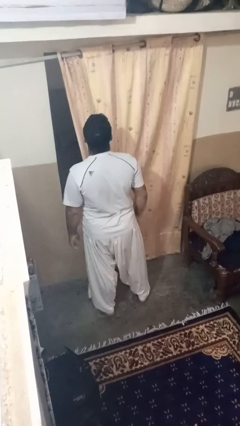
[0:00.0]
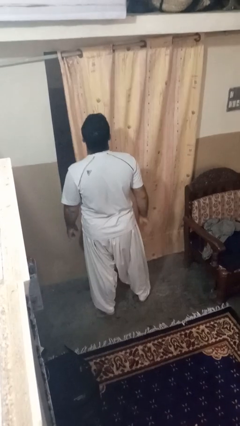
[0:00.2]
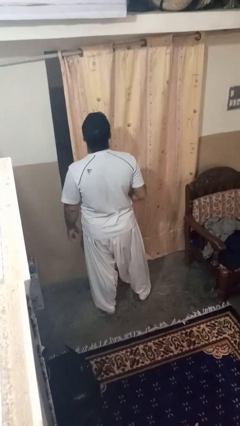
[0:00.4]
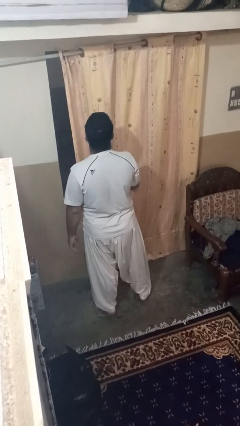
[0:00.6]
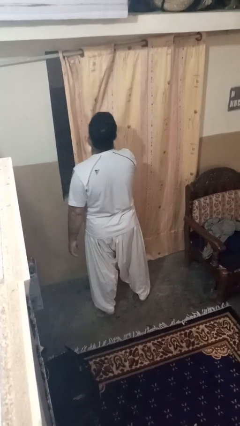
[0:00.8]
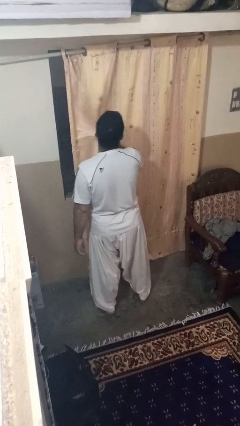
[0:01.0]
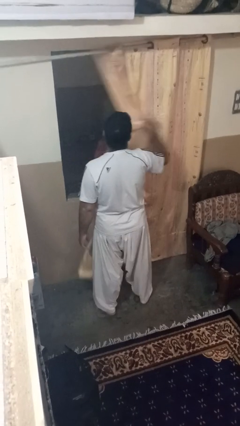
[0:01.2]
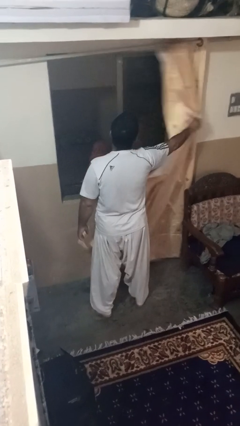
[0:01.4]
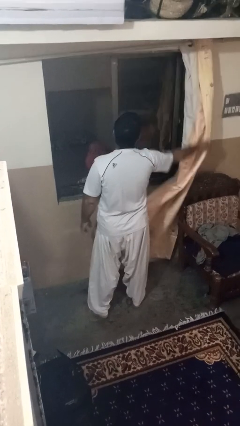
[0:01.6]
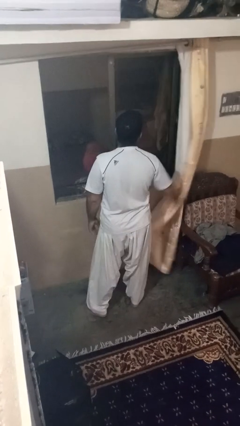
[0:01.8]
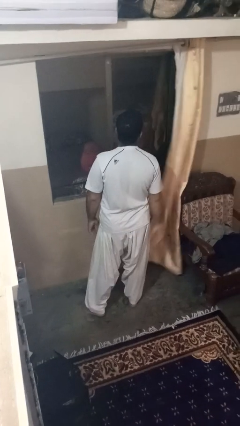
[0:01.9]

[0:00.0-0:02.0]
person opens curtains

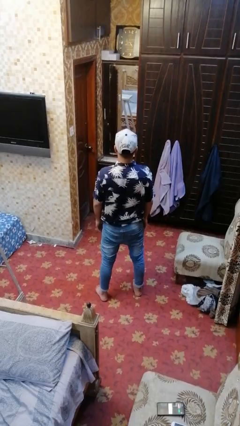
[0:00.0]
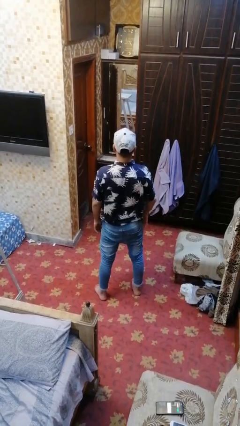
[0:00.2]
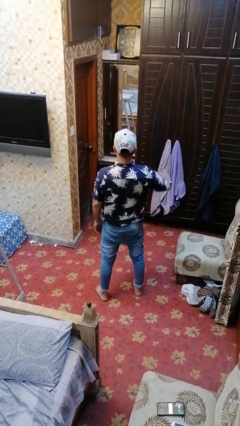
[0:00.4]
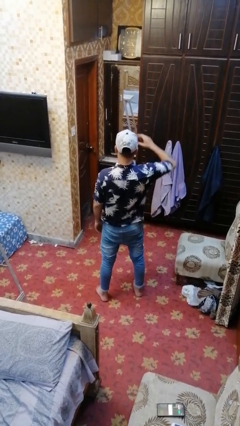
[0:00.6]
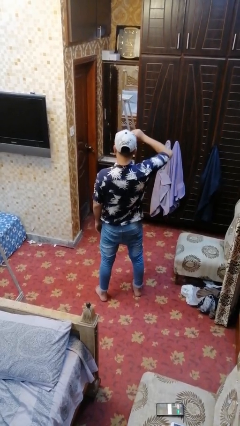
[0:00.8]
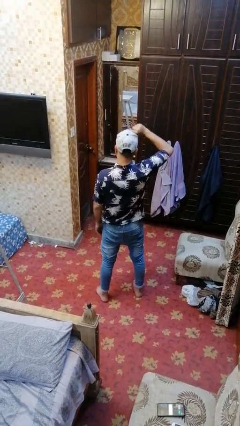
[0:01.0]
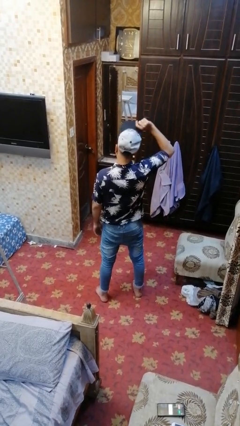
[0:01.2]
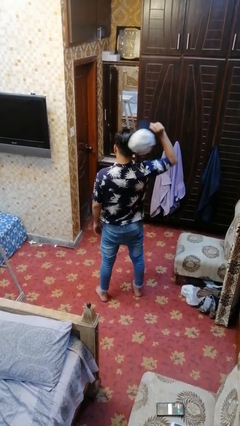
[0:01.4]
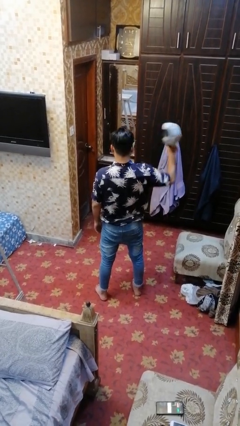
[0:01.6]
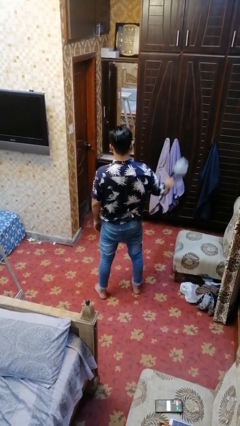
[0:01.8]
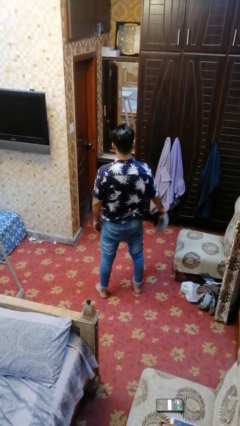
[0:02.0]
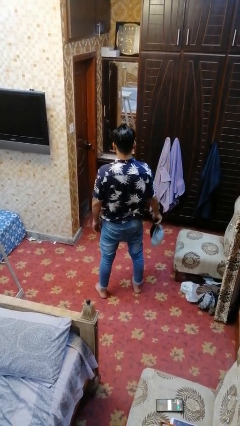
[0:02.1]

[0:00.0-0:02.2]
person takes off hat

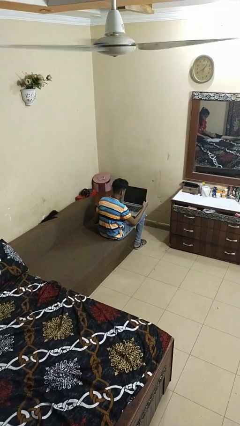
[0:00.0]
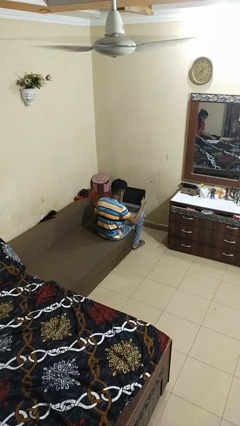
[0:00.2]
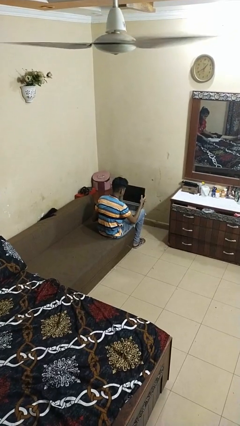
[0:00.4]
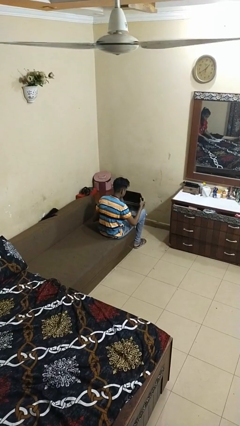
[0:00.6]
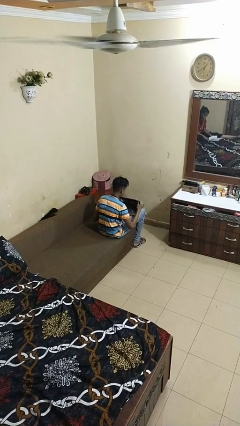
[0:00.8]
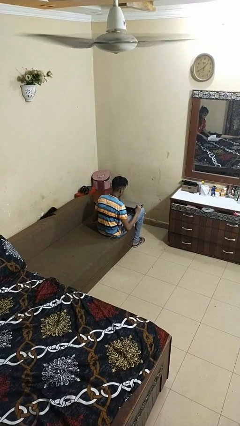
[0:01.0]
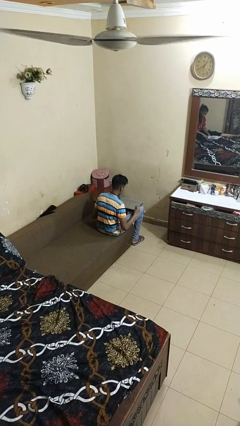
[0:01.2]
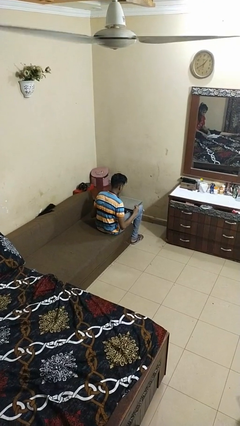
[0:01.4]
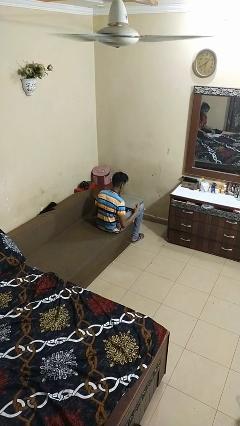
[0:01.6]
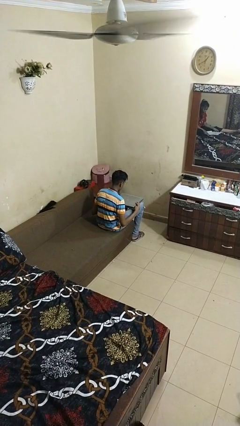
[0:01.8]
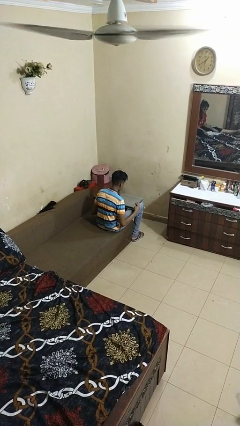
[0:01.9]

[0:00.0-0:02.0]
person closes laptop

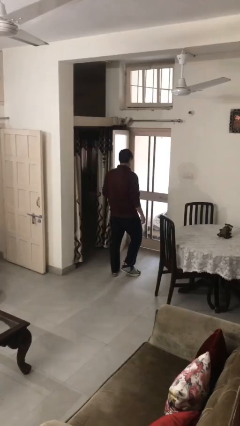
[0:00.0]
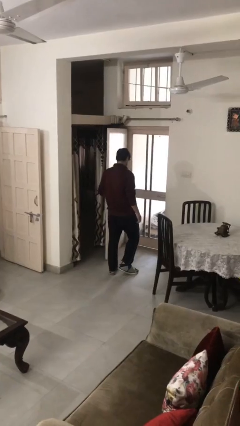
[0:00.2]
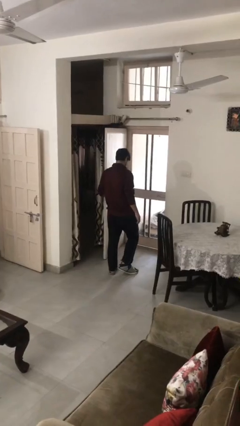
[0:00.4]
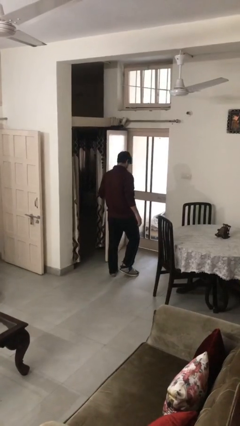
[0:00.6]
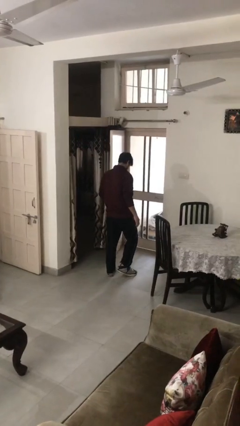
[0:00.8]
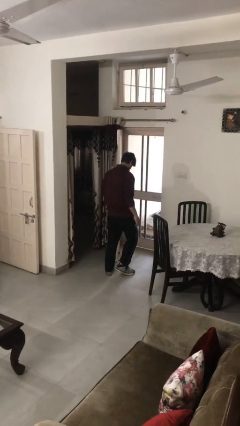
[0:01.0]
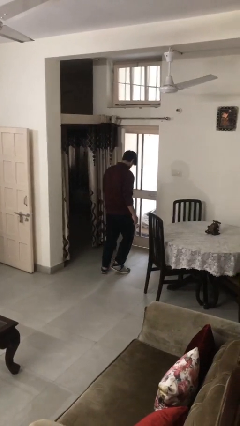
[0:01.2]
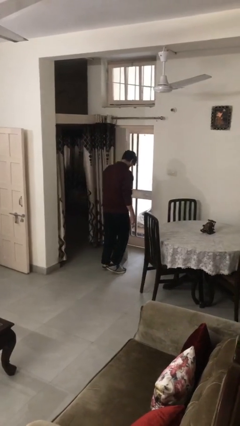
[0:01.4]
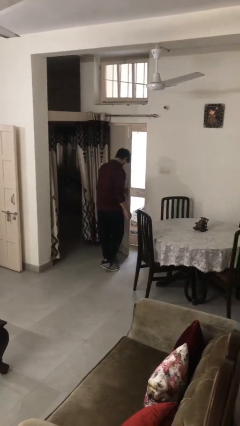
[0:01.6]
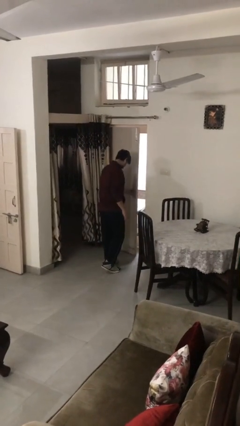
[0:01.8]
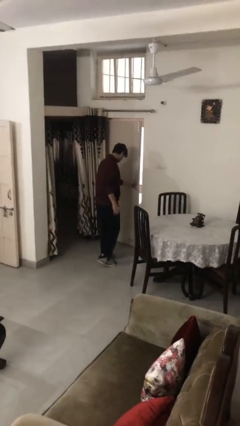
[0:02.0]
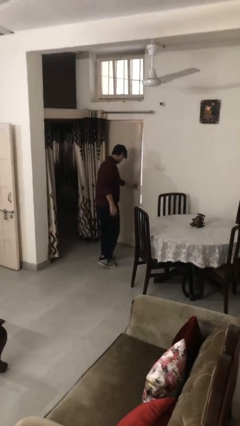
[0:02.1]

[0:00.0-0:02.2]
person closes facility door

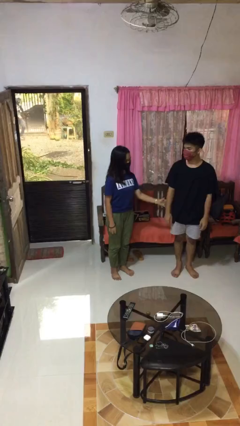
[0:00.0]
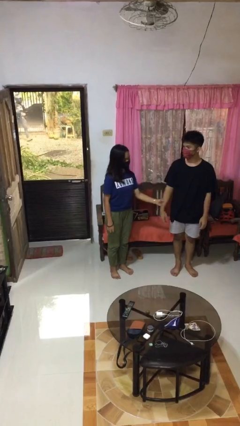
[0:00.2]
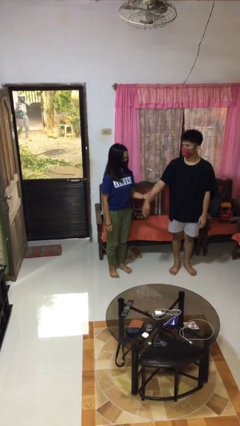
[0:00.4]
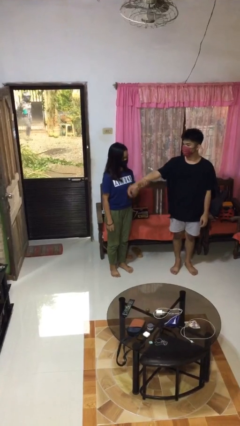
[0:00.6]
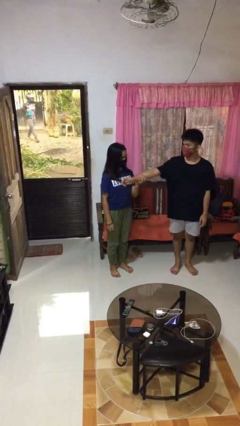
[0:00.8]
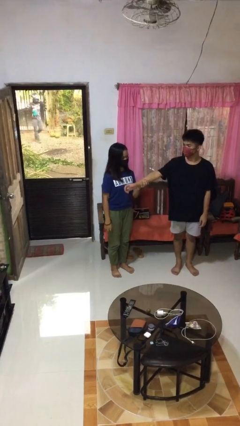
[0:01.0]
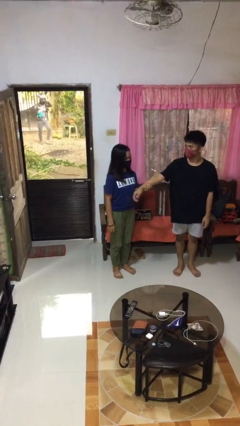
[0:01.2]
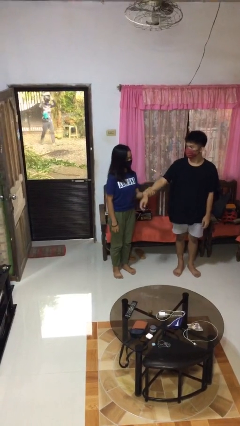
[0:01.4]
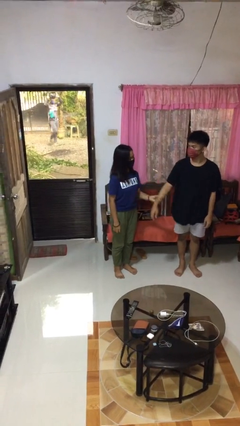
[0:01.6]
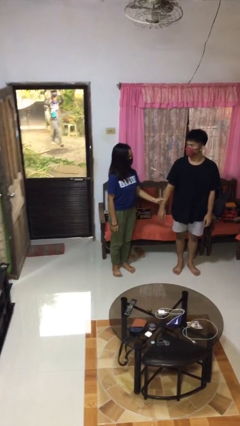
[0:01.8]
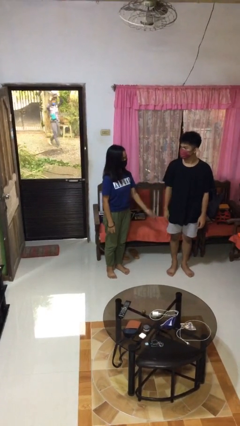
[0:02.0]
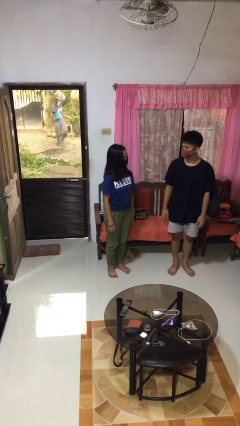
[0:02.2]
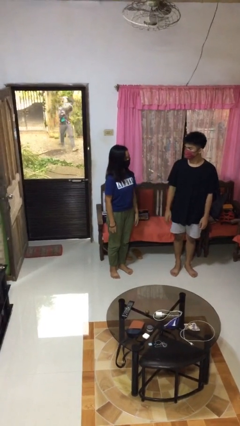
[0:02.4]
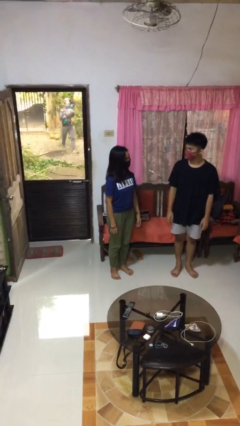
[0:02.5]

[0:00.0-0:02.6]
person grabs person by forearm

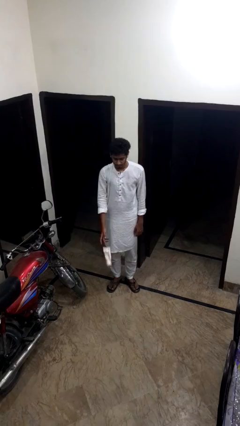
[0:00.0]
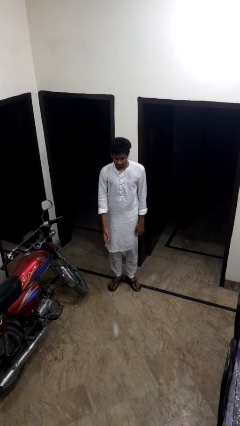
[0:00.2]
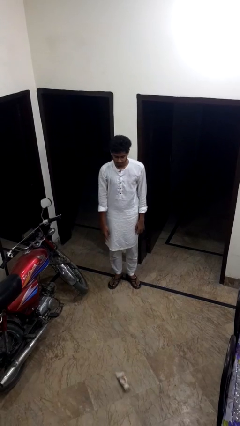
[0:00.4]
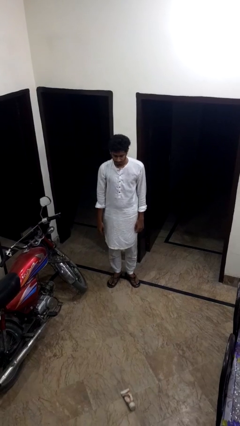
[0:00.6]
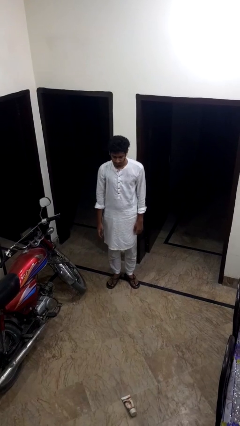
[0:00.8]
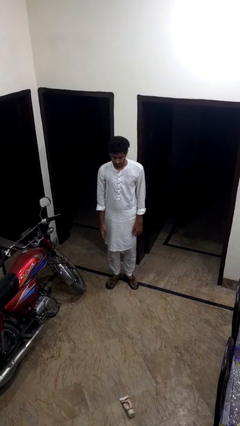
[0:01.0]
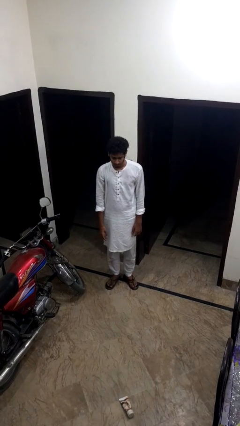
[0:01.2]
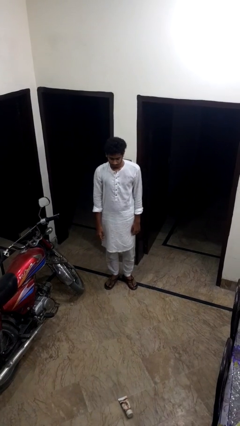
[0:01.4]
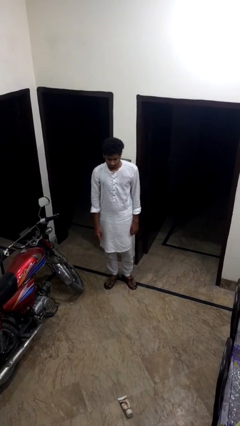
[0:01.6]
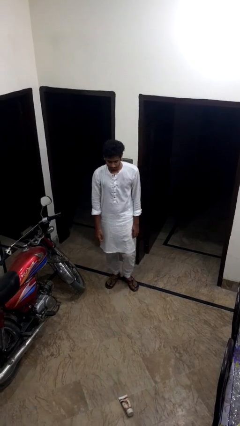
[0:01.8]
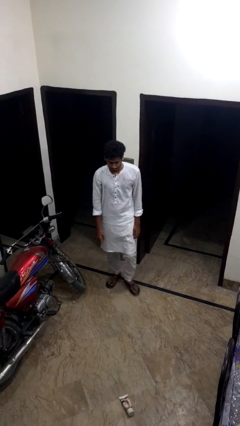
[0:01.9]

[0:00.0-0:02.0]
person throws object to ground

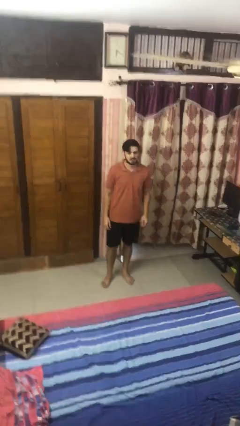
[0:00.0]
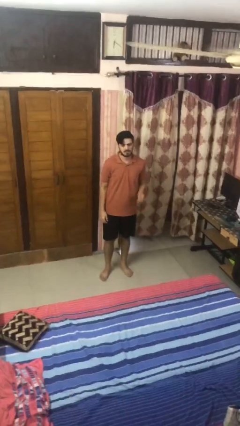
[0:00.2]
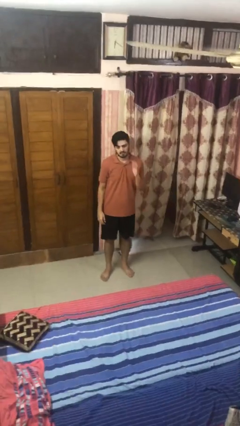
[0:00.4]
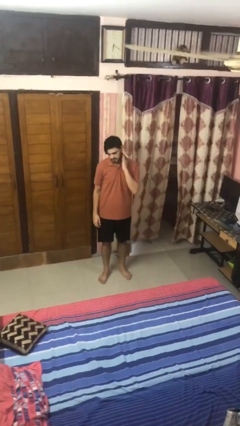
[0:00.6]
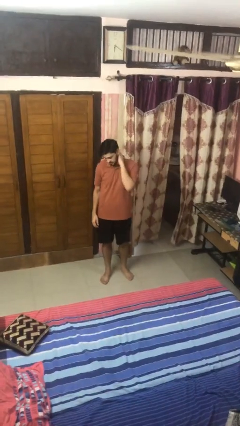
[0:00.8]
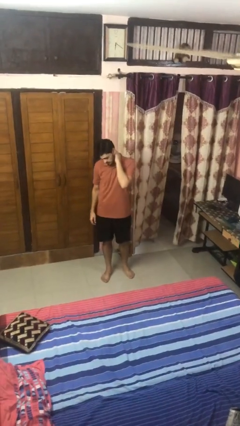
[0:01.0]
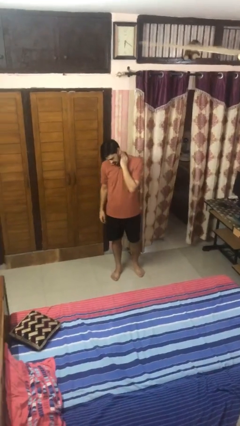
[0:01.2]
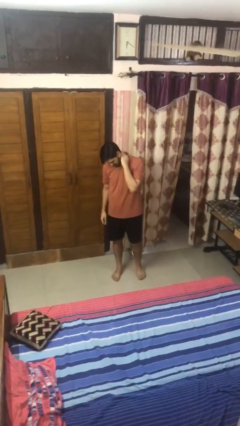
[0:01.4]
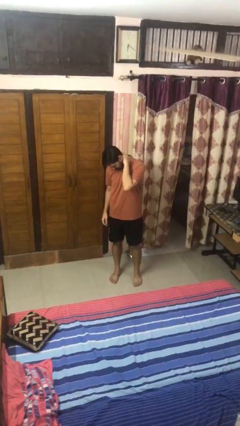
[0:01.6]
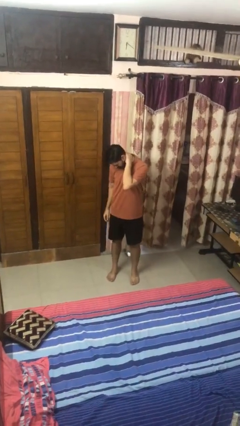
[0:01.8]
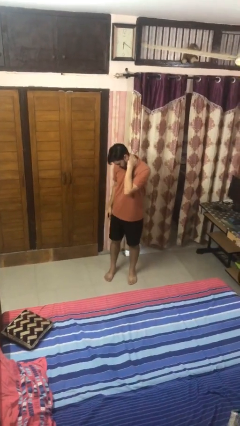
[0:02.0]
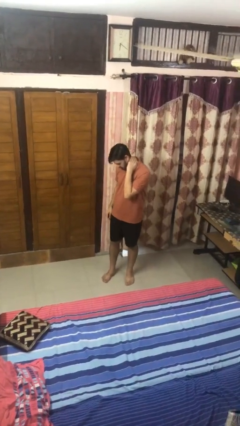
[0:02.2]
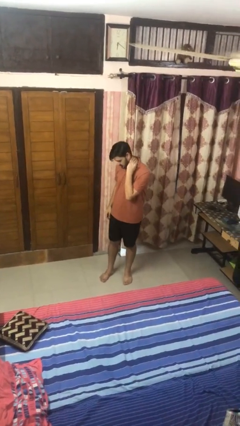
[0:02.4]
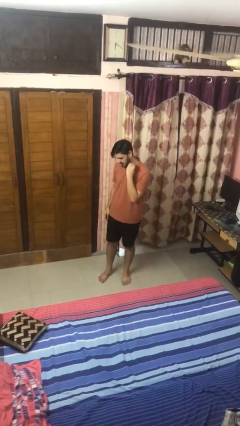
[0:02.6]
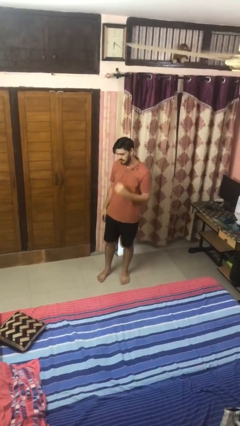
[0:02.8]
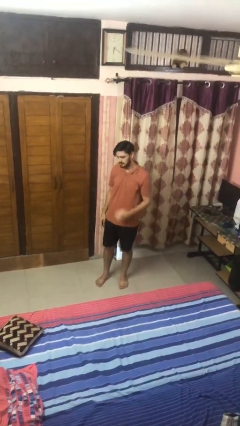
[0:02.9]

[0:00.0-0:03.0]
person rubs neck

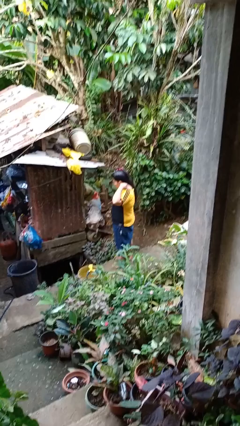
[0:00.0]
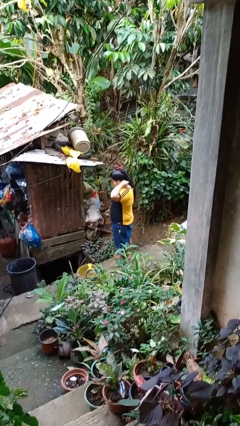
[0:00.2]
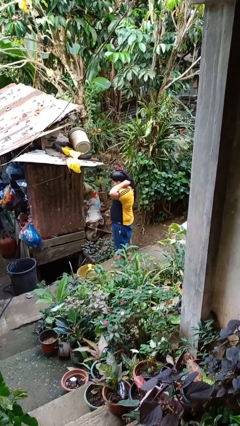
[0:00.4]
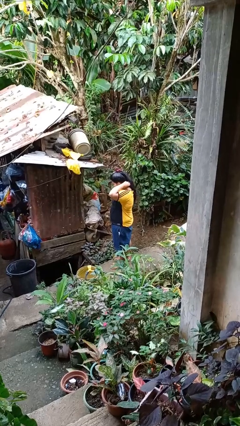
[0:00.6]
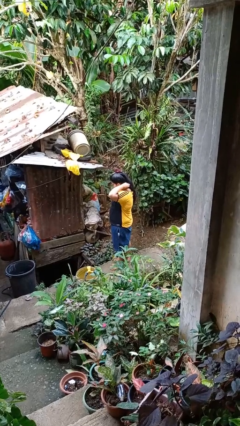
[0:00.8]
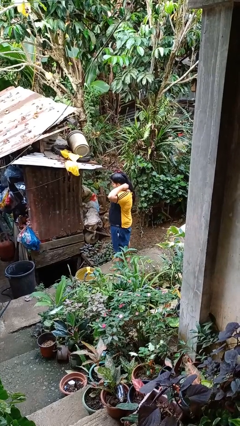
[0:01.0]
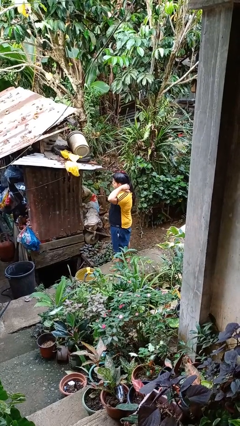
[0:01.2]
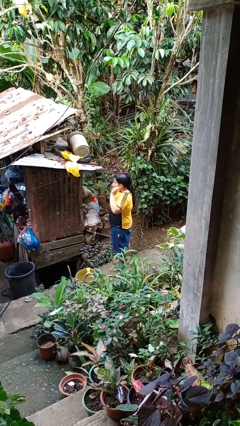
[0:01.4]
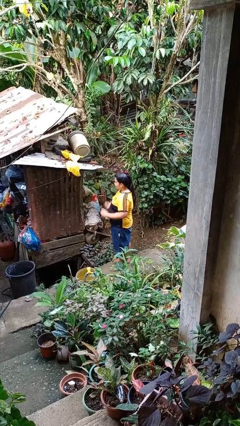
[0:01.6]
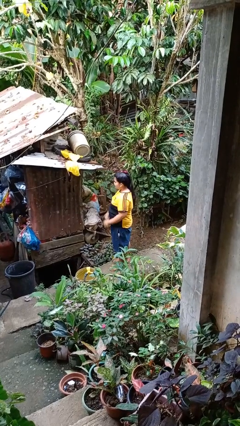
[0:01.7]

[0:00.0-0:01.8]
person puts on necklace
